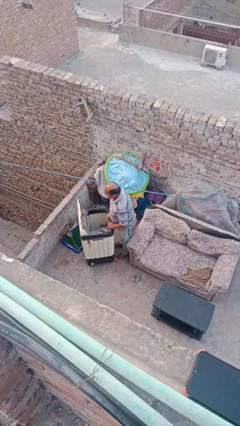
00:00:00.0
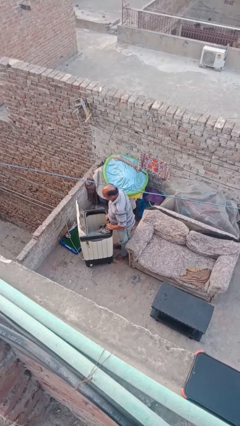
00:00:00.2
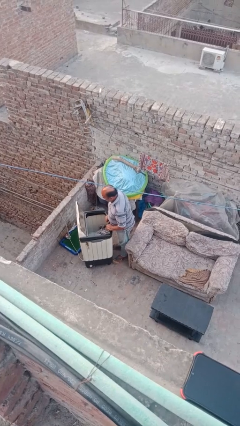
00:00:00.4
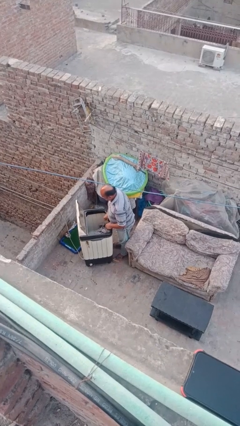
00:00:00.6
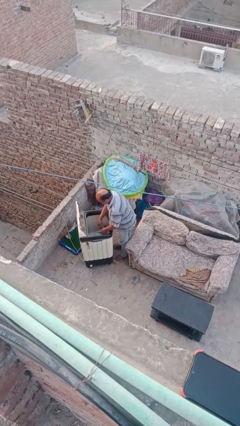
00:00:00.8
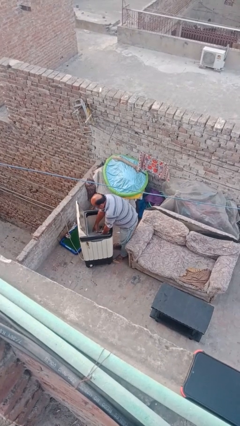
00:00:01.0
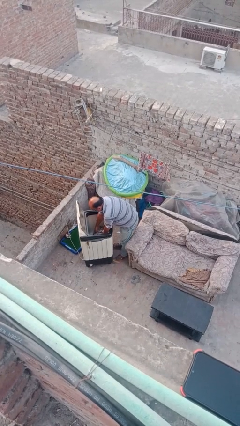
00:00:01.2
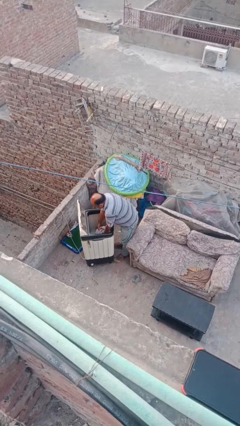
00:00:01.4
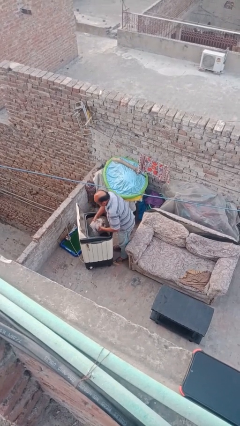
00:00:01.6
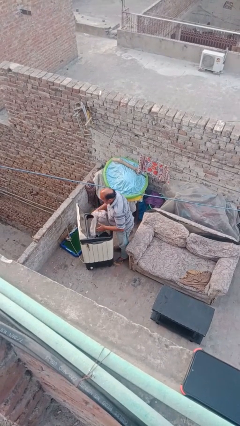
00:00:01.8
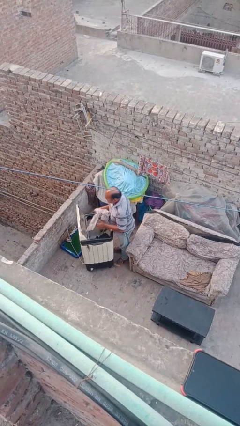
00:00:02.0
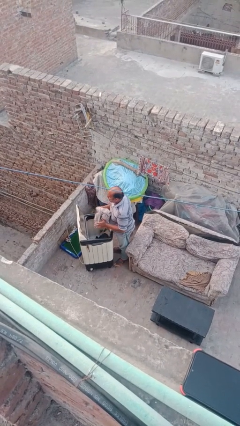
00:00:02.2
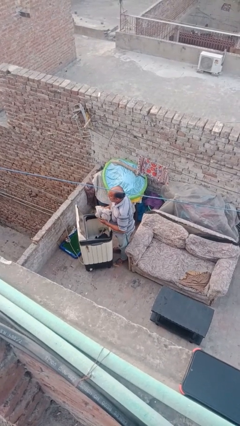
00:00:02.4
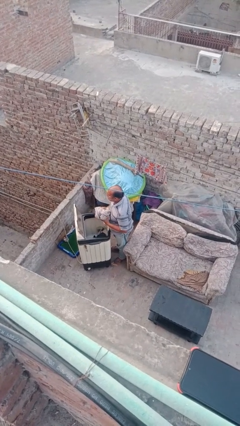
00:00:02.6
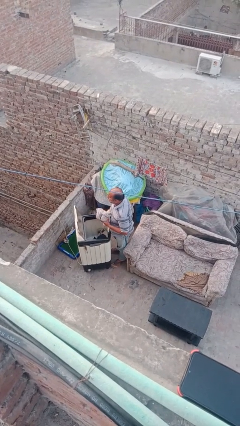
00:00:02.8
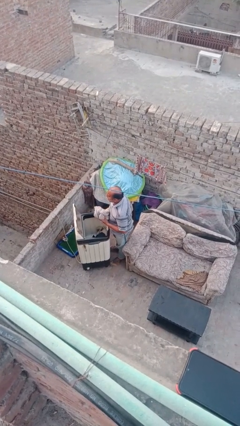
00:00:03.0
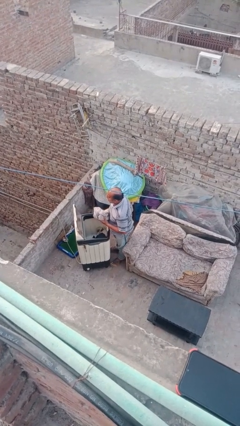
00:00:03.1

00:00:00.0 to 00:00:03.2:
person unloads clotheswasher

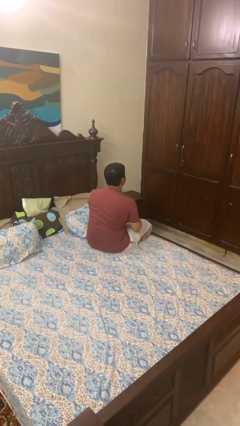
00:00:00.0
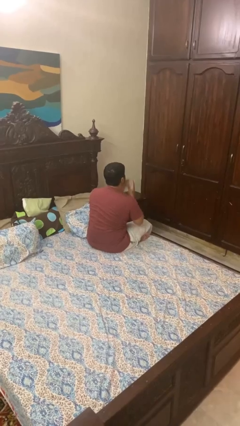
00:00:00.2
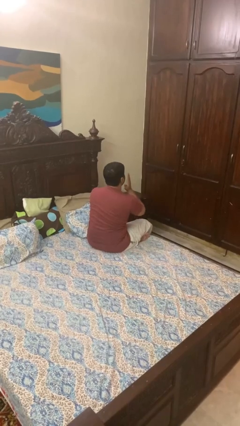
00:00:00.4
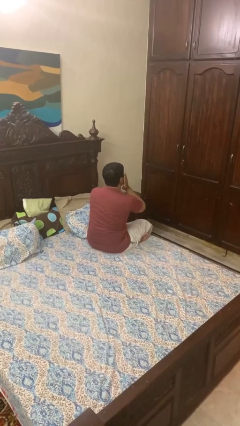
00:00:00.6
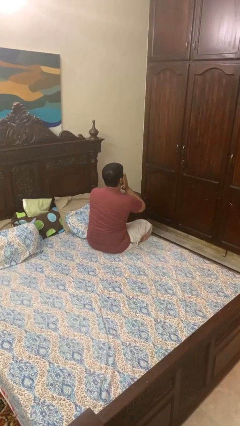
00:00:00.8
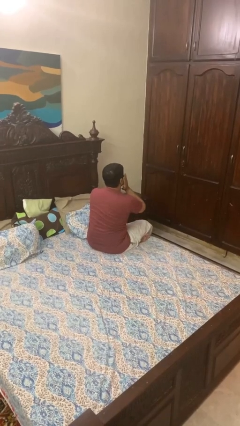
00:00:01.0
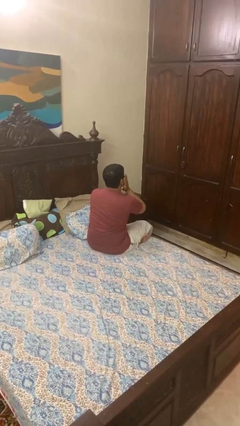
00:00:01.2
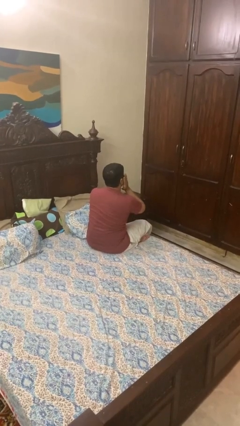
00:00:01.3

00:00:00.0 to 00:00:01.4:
person covers face with hands

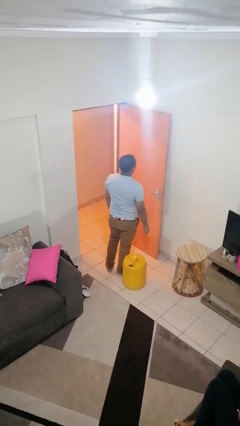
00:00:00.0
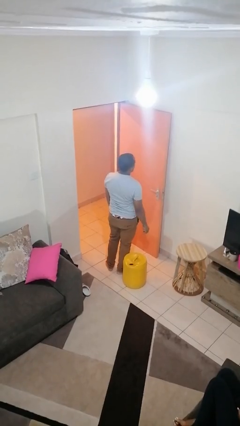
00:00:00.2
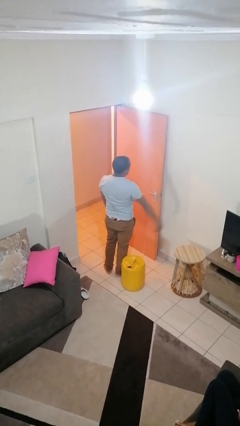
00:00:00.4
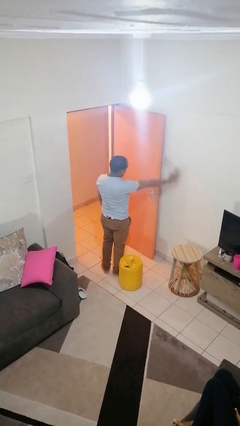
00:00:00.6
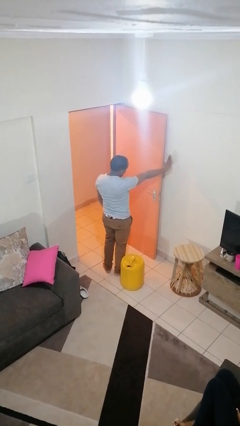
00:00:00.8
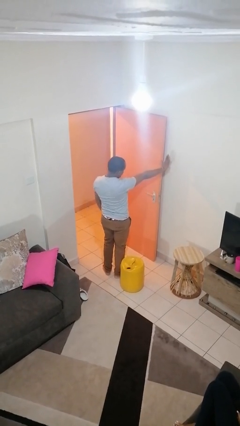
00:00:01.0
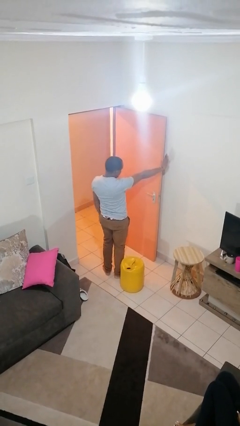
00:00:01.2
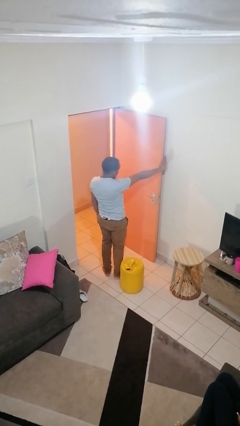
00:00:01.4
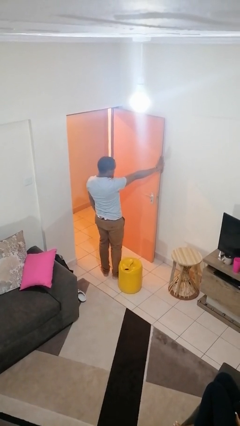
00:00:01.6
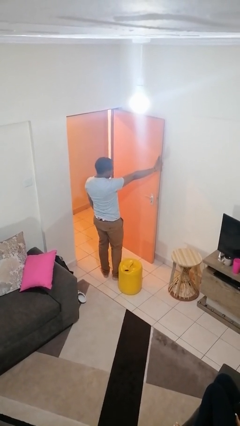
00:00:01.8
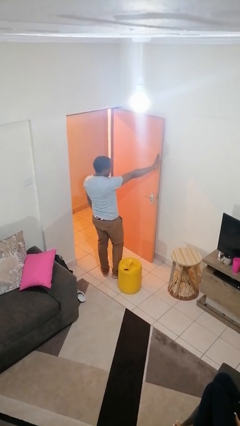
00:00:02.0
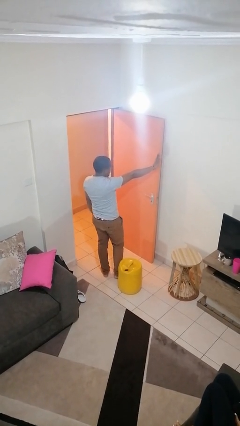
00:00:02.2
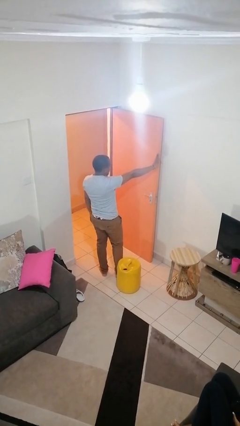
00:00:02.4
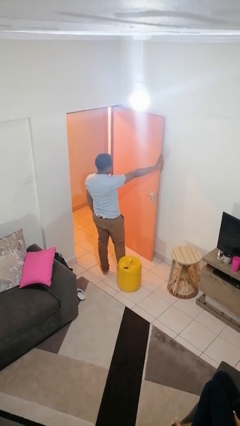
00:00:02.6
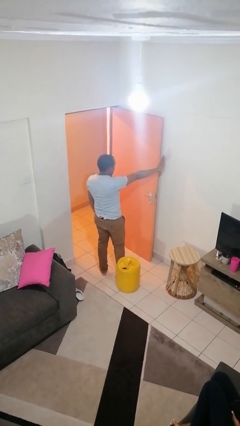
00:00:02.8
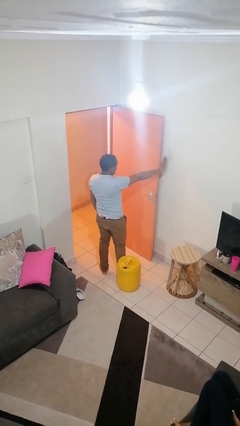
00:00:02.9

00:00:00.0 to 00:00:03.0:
person gestures stop

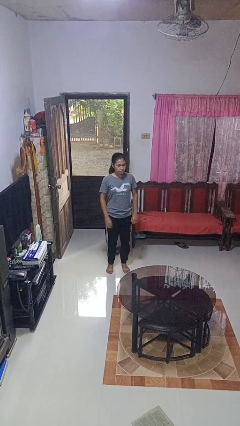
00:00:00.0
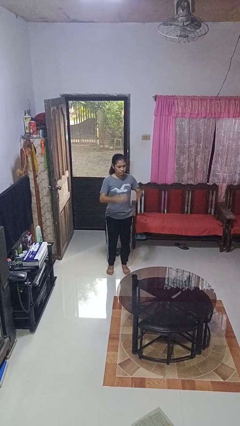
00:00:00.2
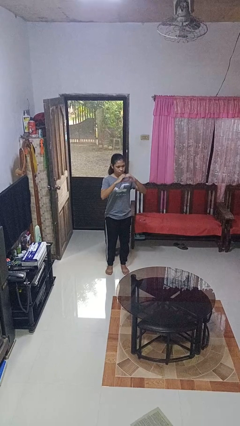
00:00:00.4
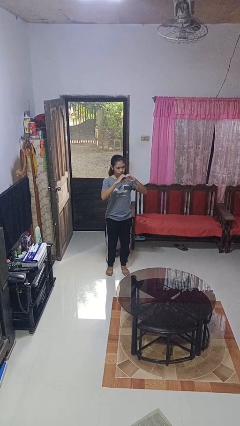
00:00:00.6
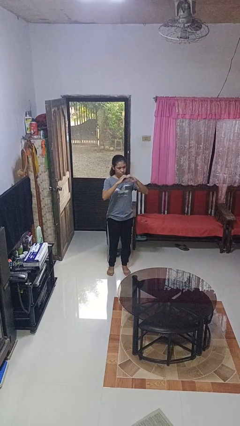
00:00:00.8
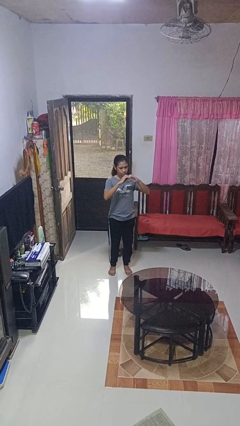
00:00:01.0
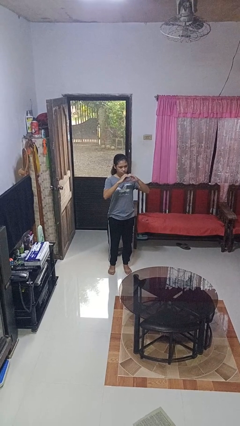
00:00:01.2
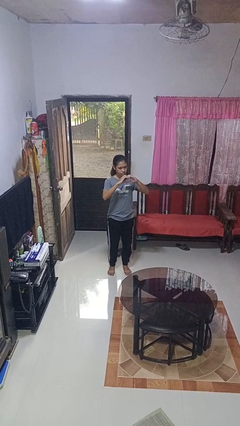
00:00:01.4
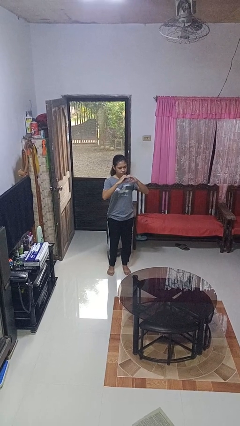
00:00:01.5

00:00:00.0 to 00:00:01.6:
person gestures heart

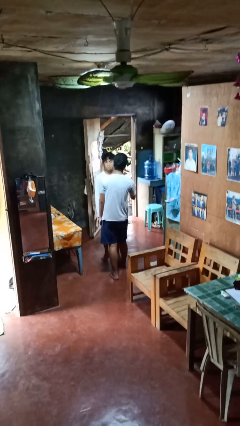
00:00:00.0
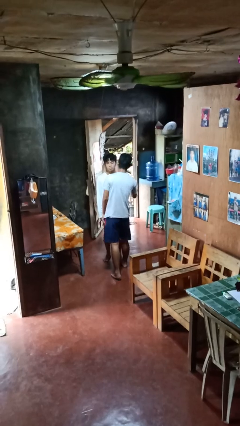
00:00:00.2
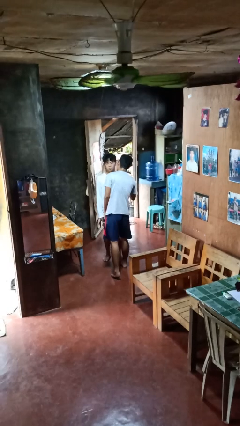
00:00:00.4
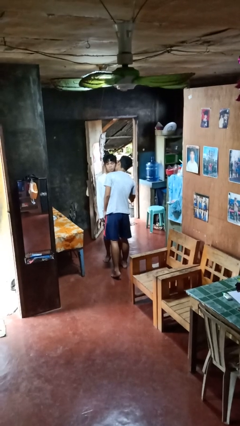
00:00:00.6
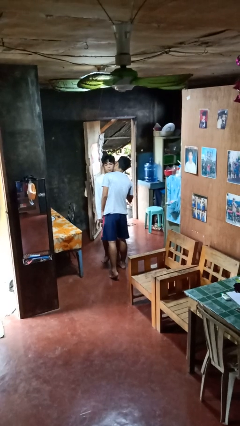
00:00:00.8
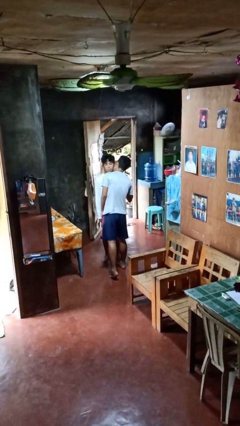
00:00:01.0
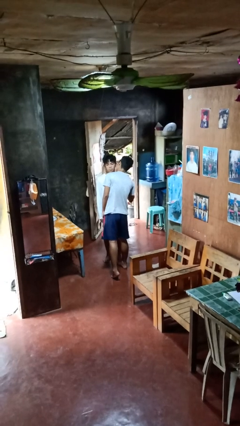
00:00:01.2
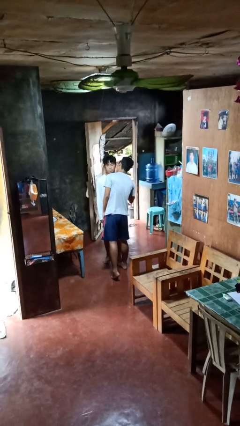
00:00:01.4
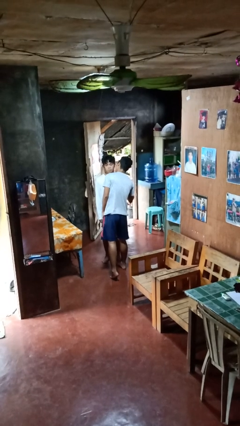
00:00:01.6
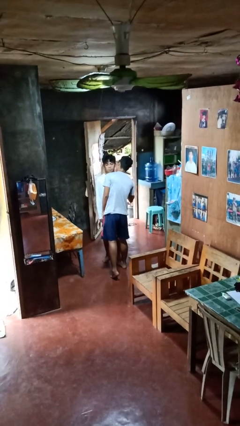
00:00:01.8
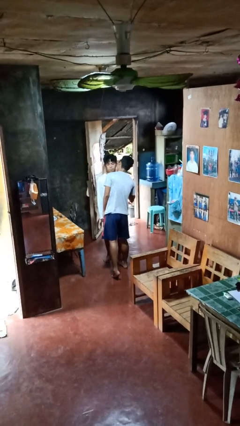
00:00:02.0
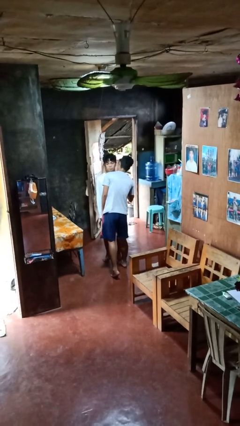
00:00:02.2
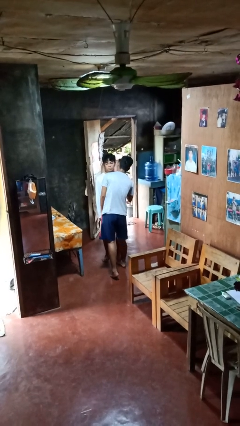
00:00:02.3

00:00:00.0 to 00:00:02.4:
person kisses cheek of person

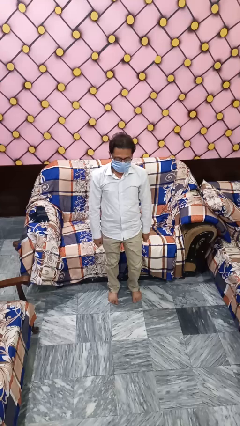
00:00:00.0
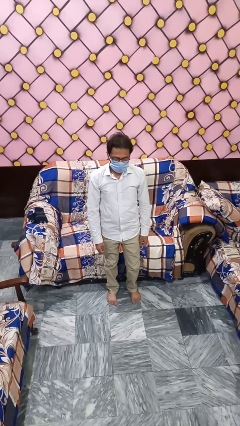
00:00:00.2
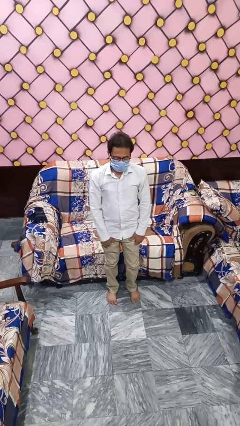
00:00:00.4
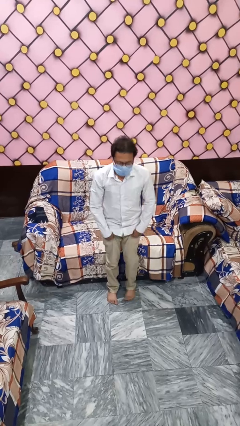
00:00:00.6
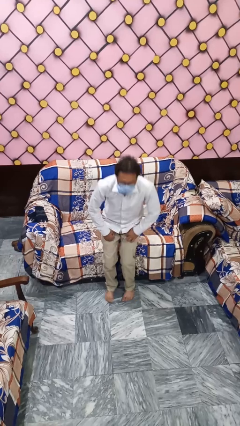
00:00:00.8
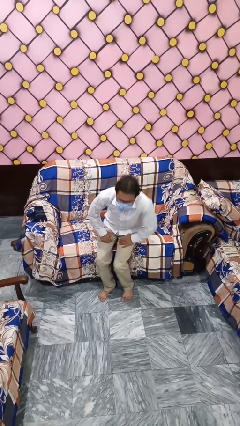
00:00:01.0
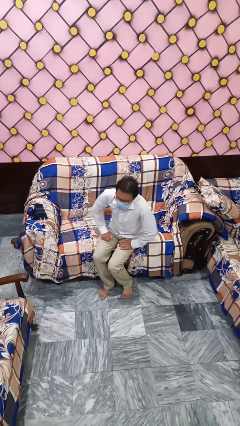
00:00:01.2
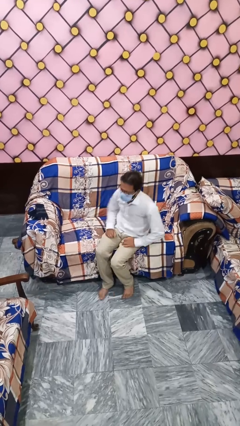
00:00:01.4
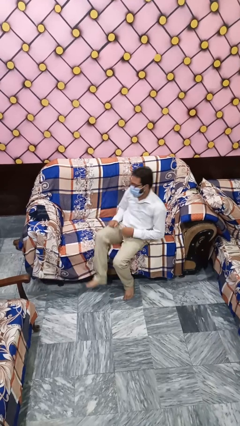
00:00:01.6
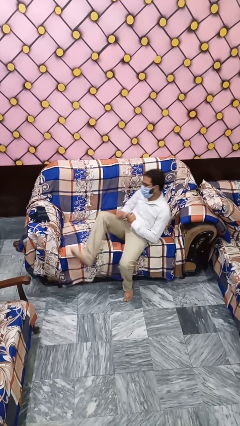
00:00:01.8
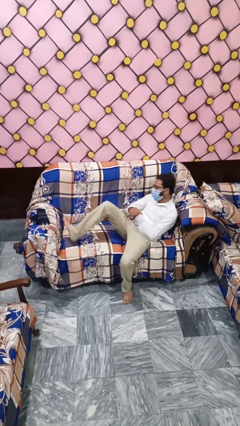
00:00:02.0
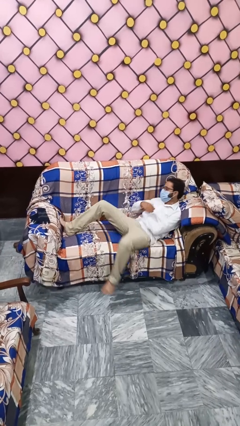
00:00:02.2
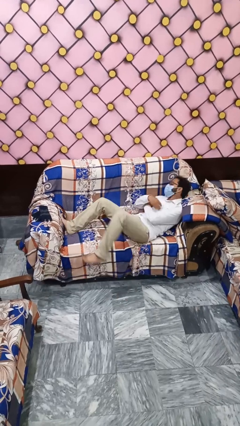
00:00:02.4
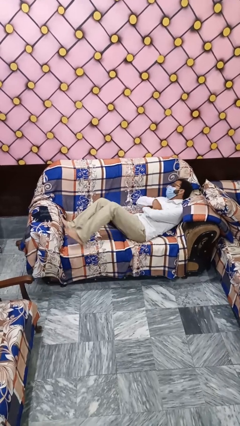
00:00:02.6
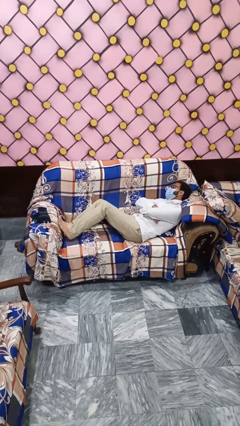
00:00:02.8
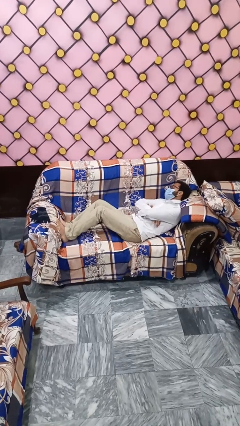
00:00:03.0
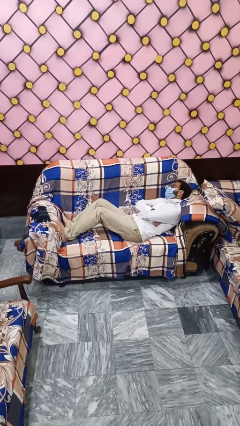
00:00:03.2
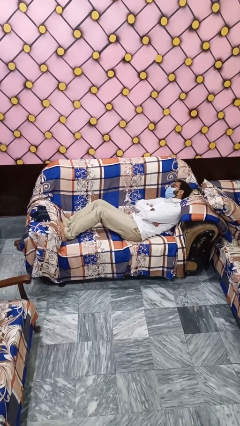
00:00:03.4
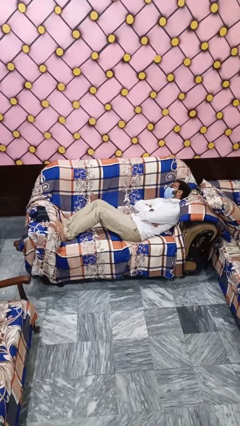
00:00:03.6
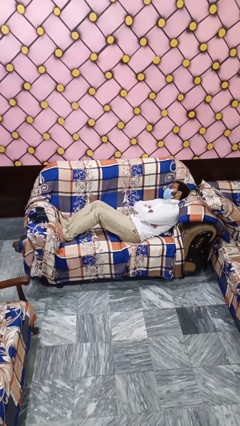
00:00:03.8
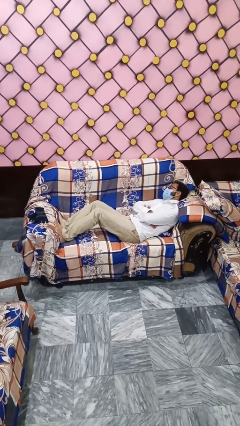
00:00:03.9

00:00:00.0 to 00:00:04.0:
person lies down on couch

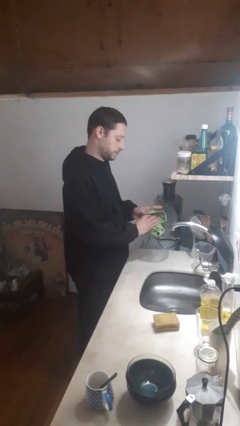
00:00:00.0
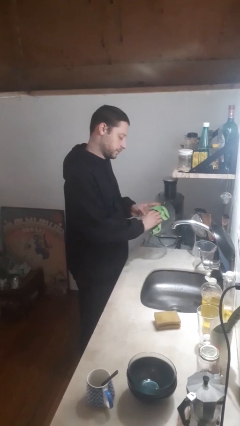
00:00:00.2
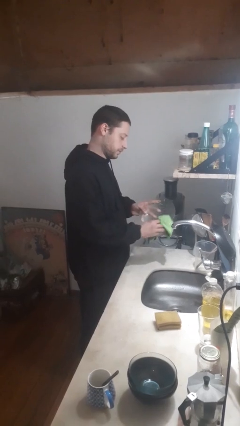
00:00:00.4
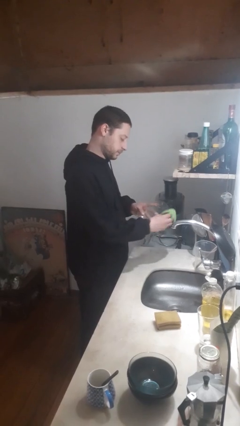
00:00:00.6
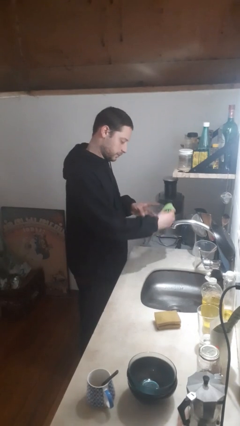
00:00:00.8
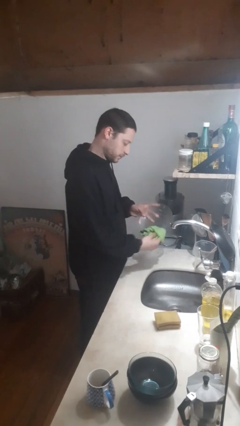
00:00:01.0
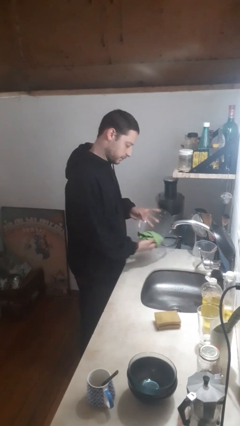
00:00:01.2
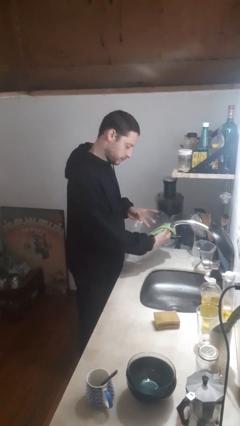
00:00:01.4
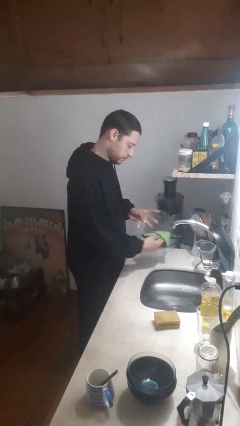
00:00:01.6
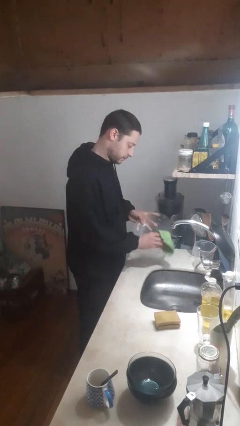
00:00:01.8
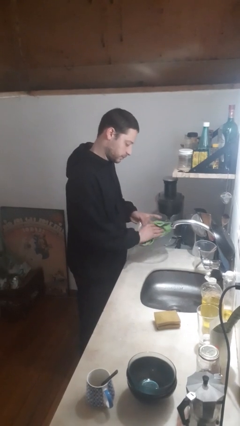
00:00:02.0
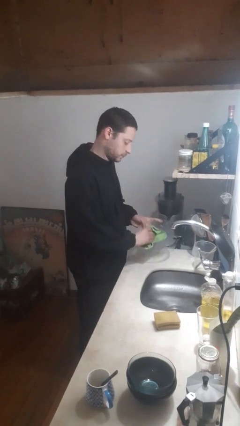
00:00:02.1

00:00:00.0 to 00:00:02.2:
person dries dish
